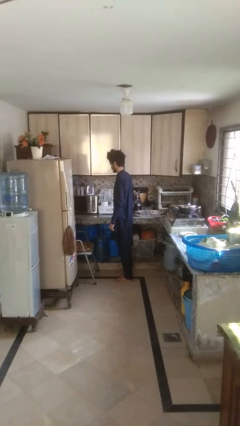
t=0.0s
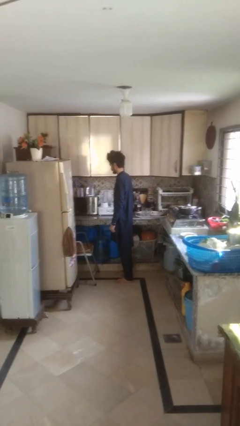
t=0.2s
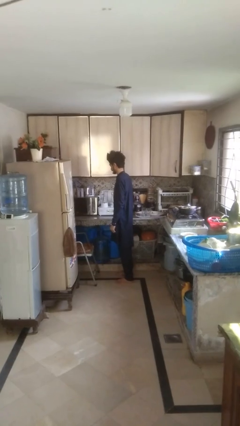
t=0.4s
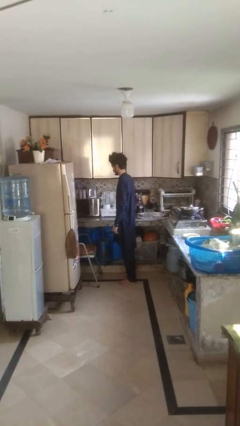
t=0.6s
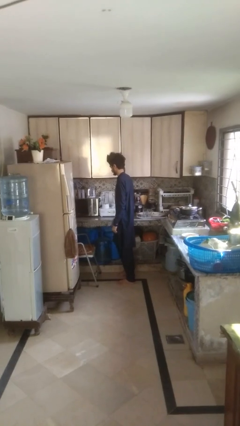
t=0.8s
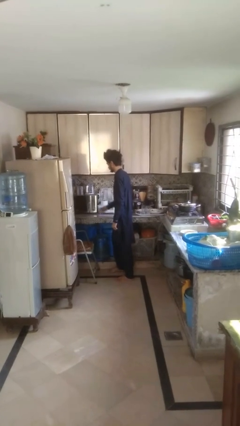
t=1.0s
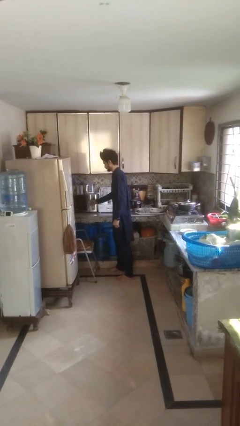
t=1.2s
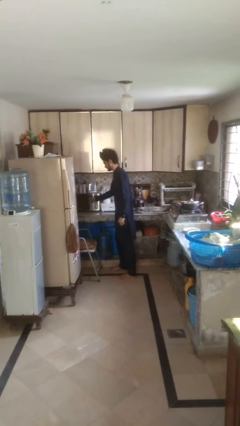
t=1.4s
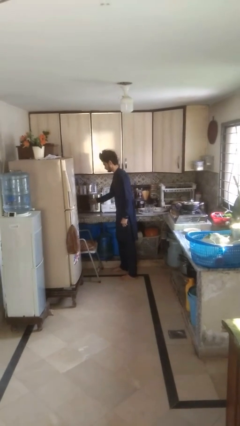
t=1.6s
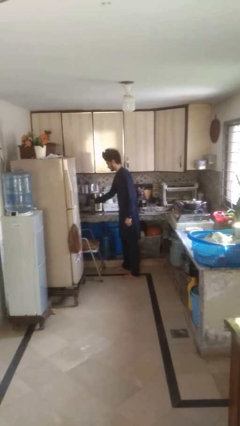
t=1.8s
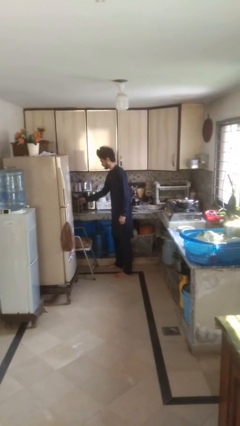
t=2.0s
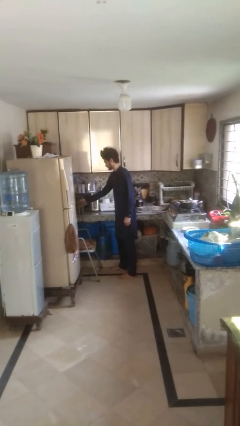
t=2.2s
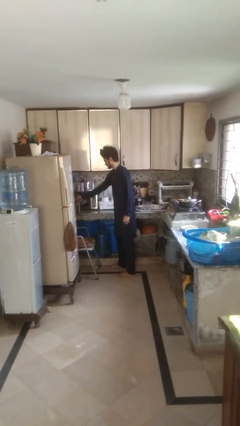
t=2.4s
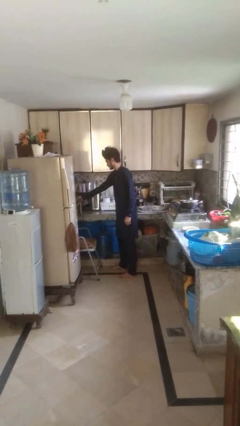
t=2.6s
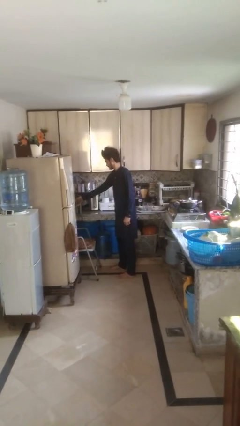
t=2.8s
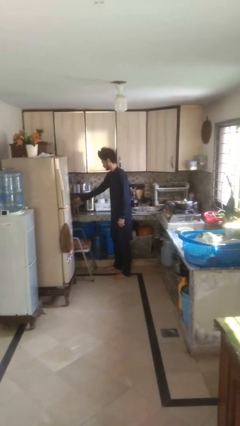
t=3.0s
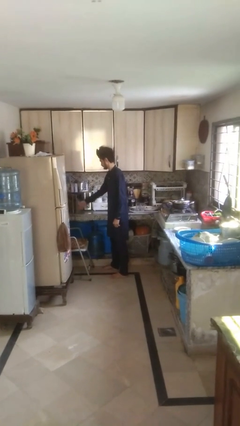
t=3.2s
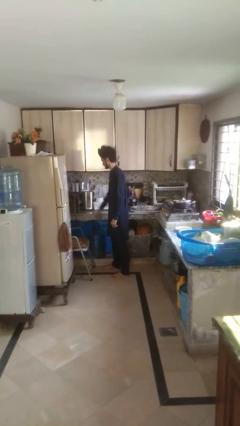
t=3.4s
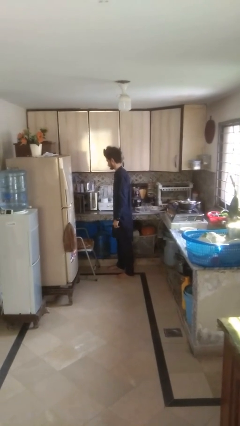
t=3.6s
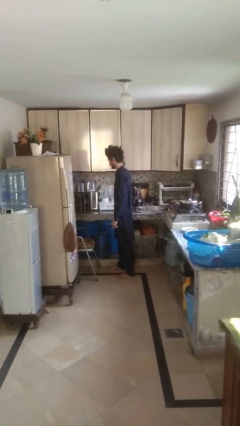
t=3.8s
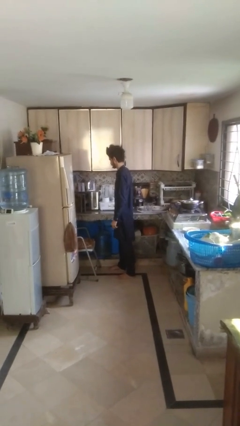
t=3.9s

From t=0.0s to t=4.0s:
person opens oven door

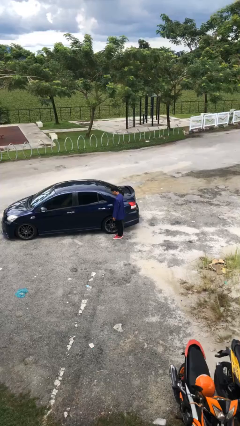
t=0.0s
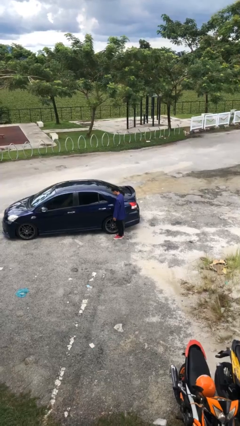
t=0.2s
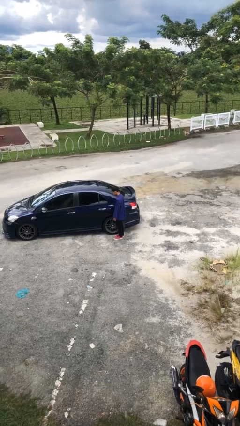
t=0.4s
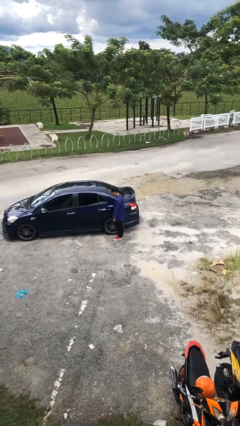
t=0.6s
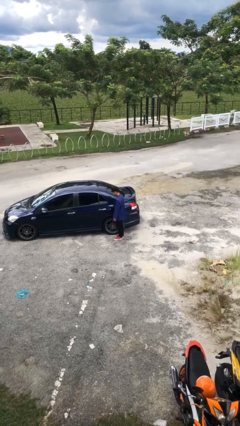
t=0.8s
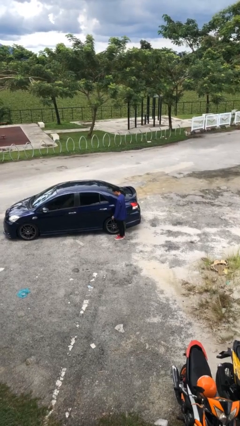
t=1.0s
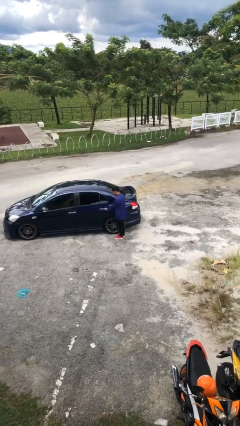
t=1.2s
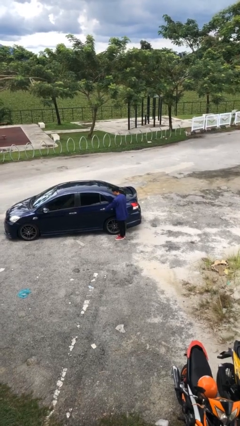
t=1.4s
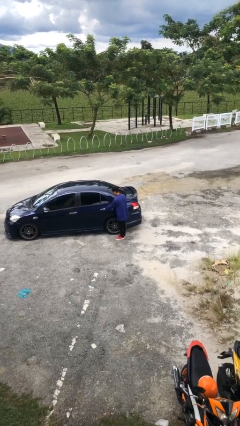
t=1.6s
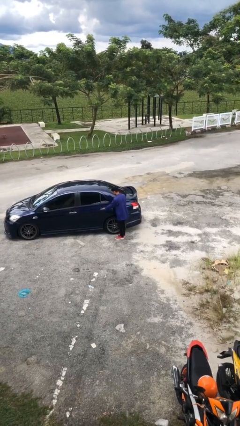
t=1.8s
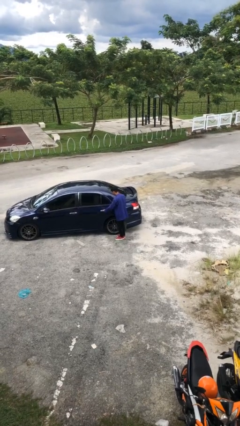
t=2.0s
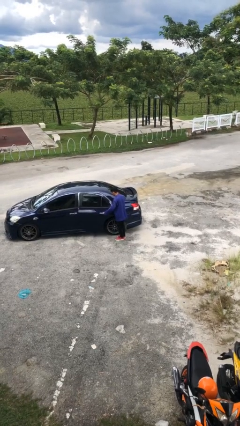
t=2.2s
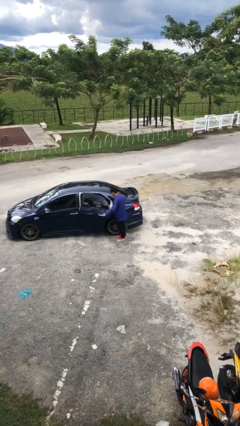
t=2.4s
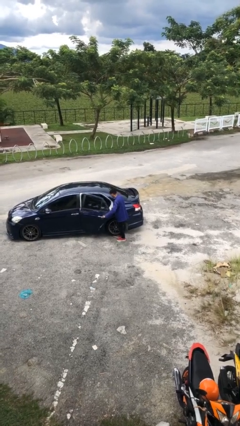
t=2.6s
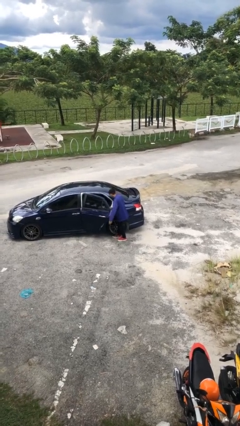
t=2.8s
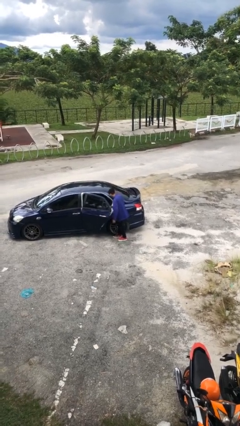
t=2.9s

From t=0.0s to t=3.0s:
person opens car door

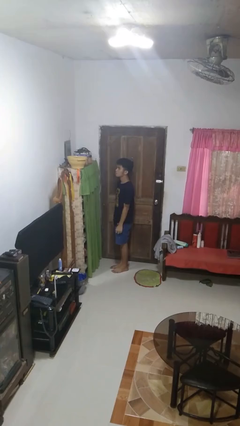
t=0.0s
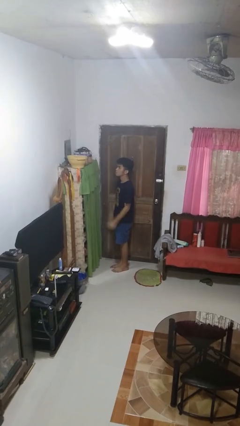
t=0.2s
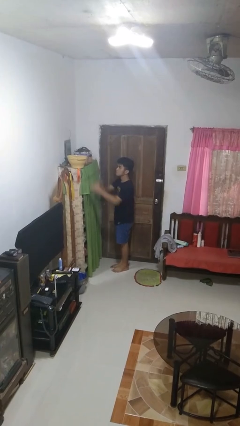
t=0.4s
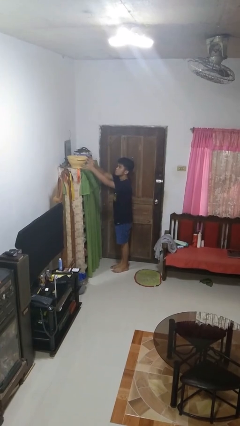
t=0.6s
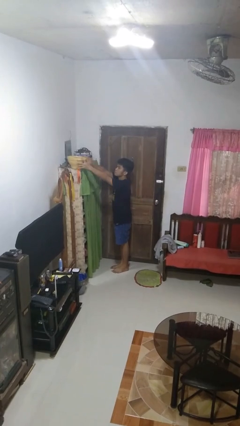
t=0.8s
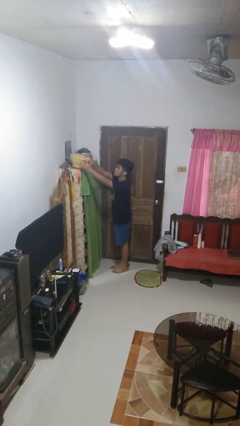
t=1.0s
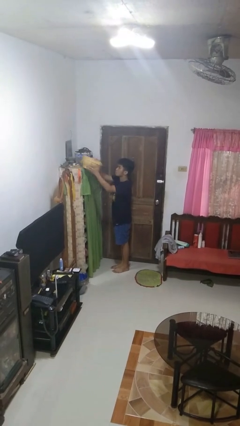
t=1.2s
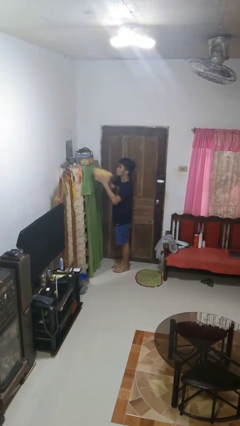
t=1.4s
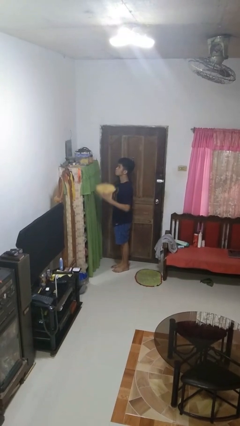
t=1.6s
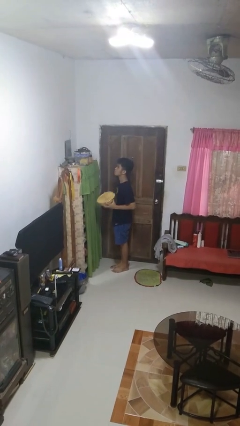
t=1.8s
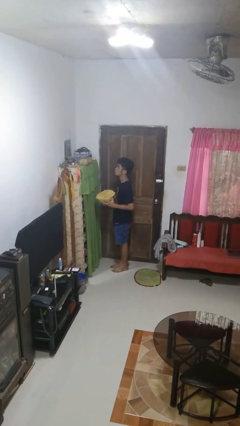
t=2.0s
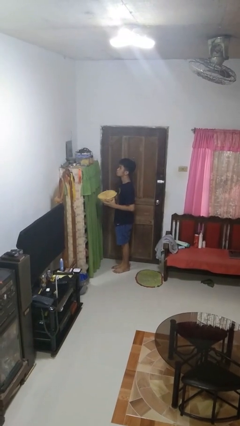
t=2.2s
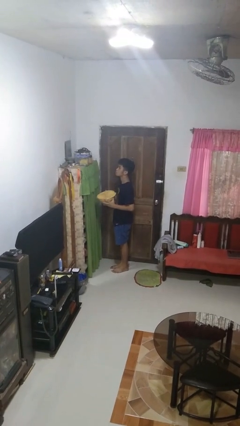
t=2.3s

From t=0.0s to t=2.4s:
person picks up object from shelf

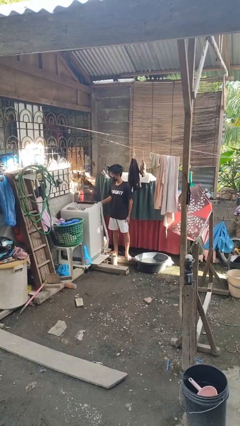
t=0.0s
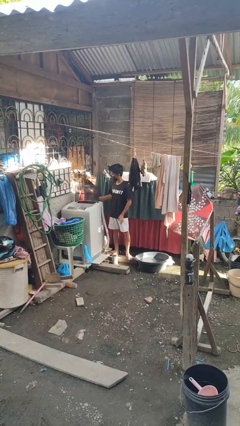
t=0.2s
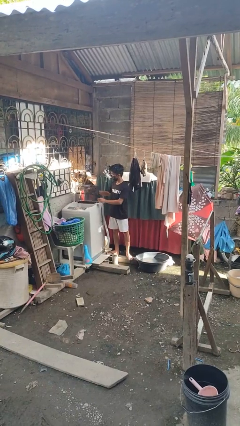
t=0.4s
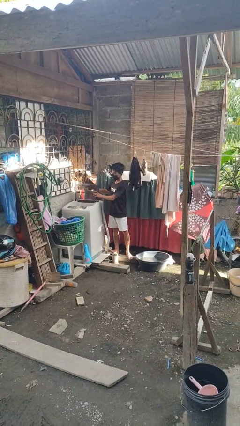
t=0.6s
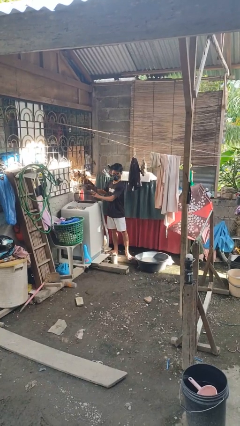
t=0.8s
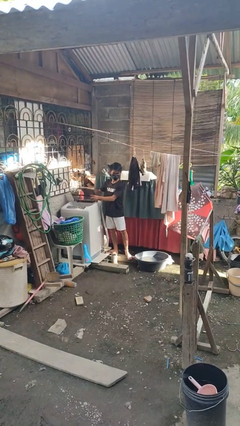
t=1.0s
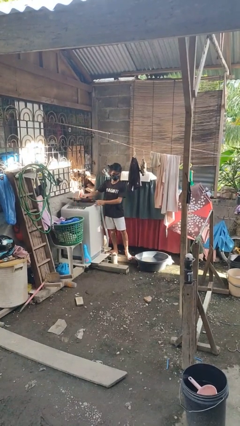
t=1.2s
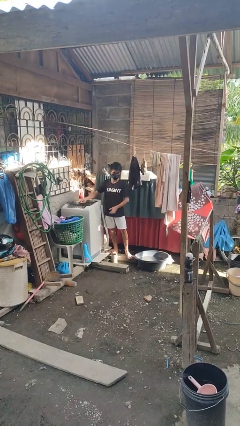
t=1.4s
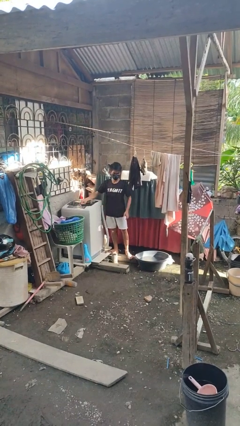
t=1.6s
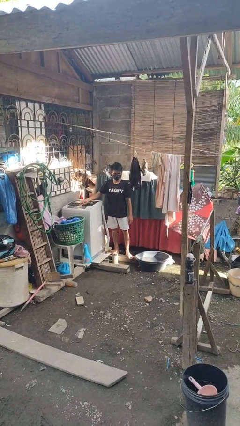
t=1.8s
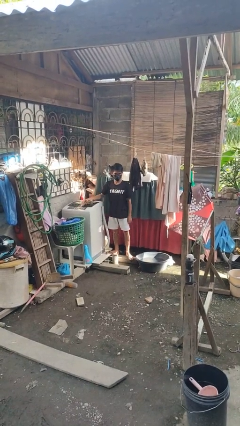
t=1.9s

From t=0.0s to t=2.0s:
person closes clothes washer

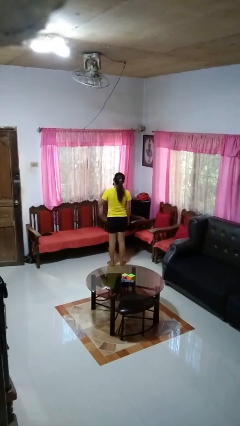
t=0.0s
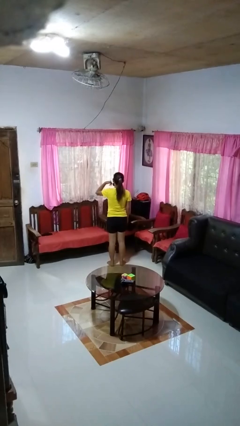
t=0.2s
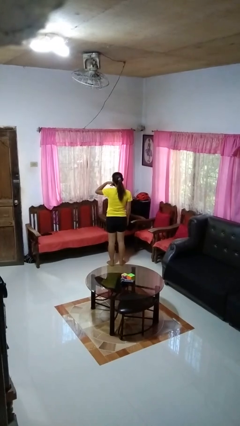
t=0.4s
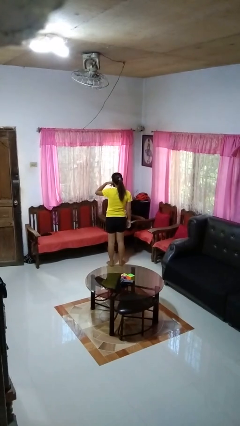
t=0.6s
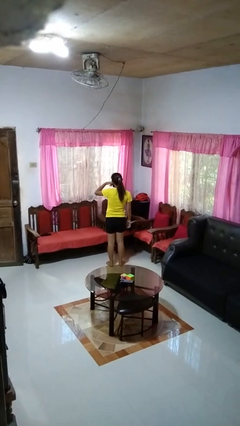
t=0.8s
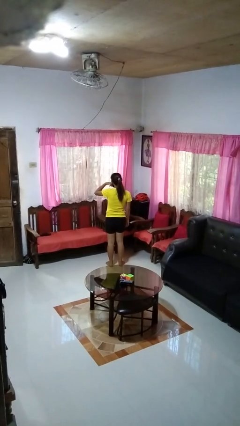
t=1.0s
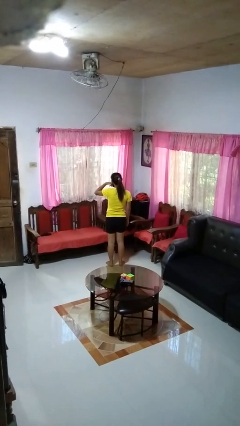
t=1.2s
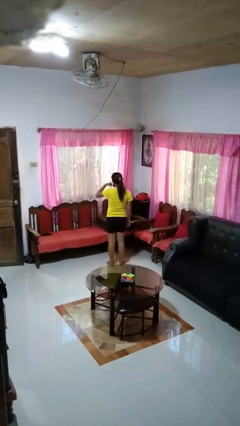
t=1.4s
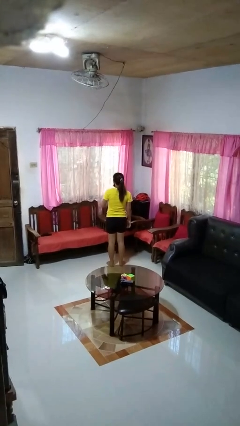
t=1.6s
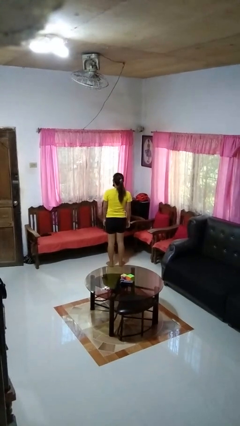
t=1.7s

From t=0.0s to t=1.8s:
person gestures call me

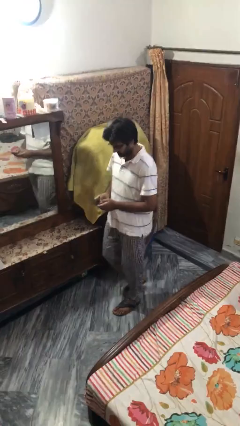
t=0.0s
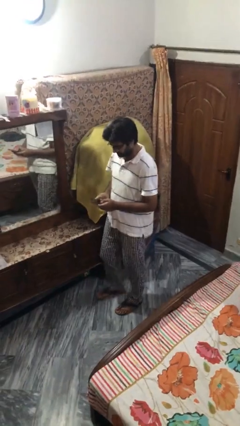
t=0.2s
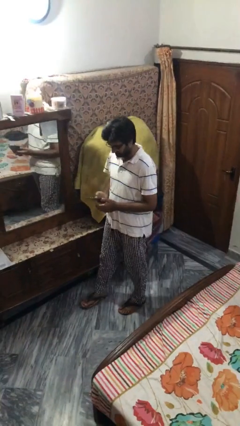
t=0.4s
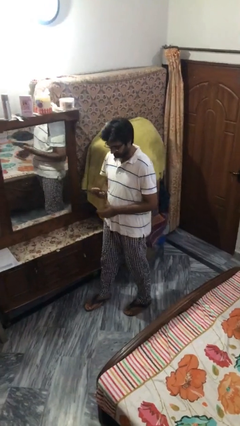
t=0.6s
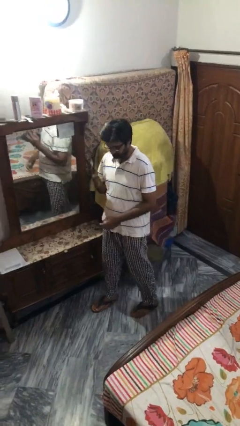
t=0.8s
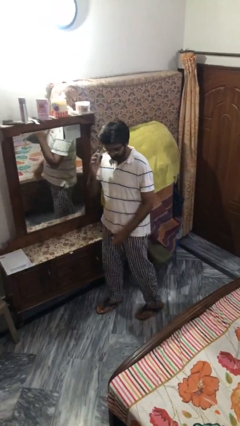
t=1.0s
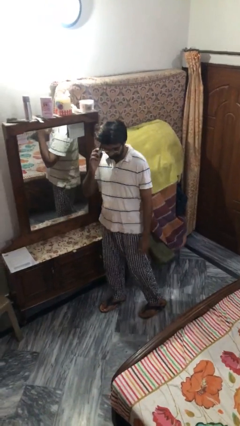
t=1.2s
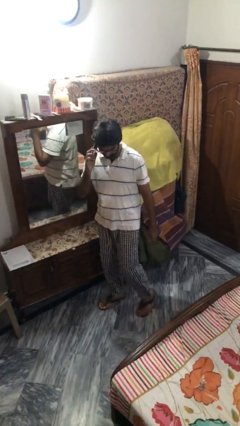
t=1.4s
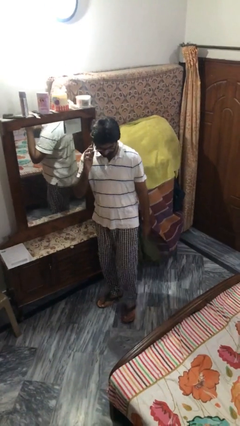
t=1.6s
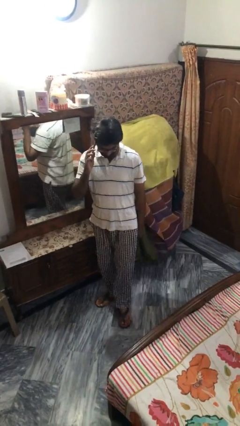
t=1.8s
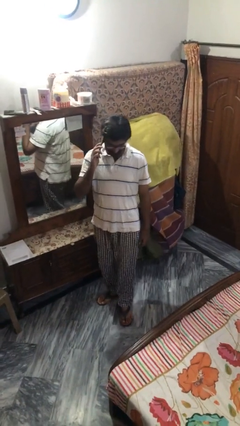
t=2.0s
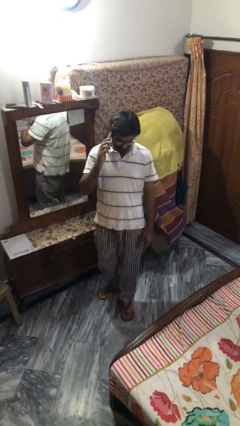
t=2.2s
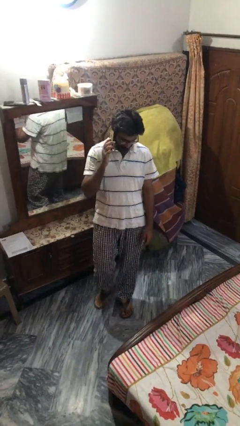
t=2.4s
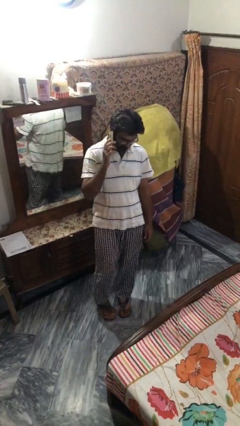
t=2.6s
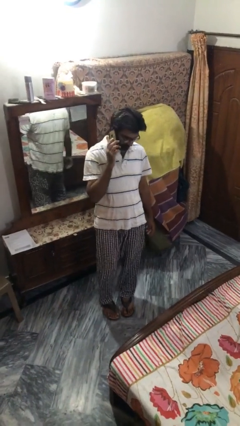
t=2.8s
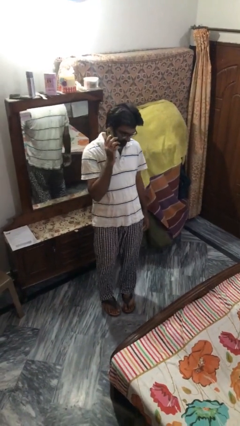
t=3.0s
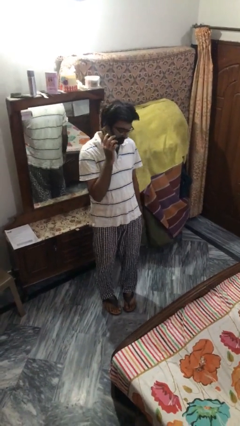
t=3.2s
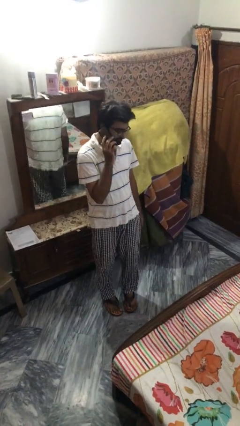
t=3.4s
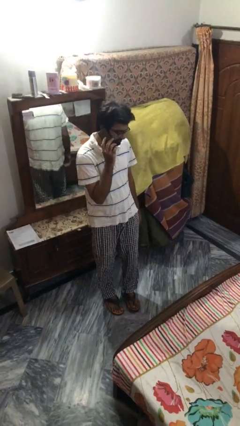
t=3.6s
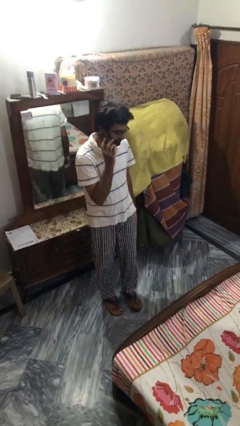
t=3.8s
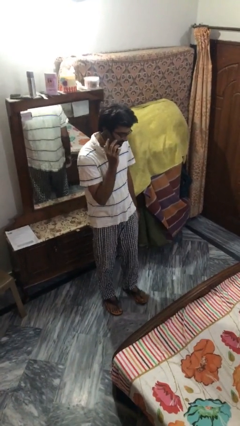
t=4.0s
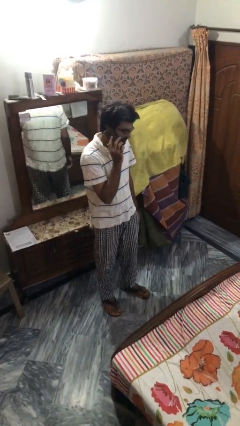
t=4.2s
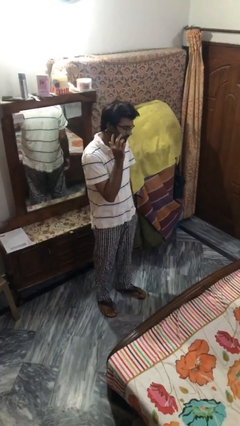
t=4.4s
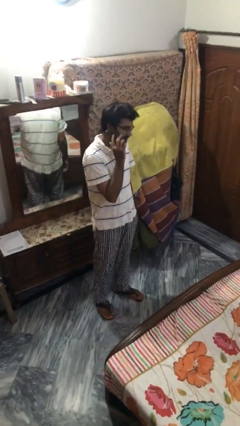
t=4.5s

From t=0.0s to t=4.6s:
person talks on phone
